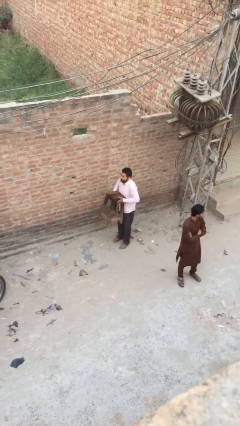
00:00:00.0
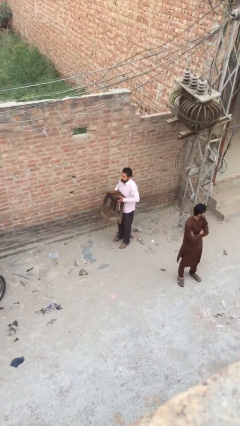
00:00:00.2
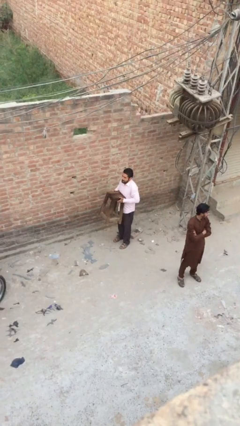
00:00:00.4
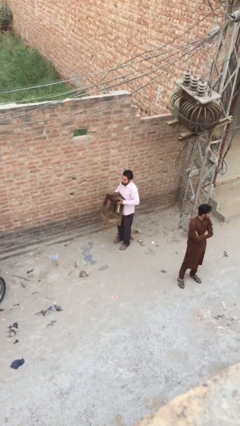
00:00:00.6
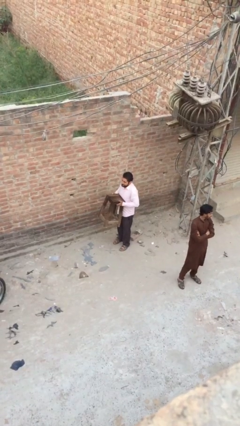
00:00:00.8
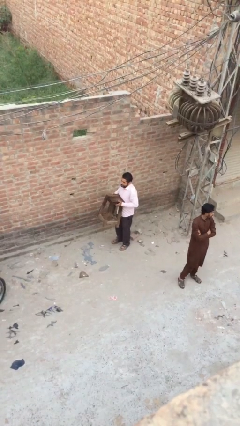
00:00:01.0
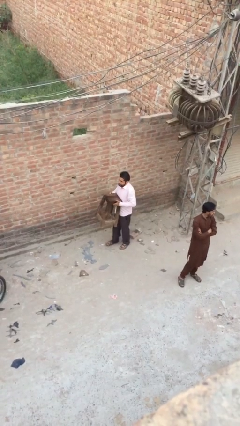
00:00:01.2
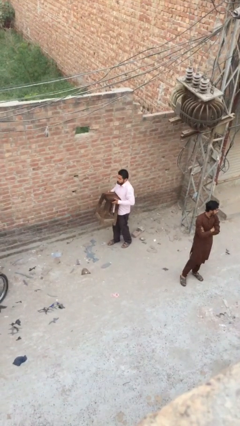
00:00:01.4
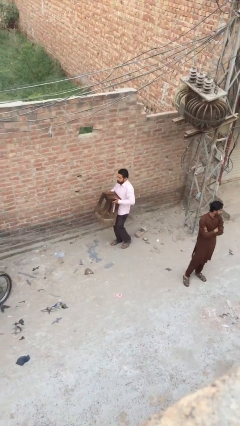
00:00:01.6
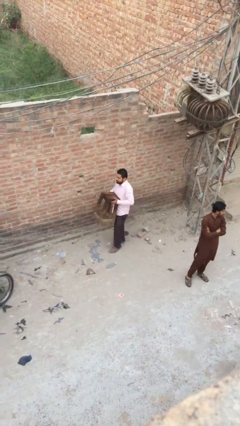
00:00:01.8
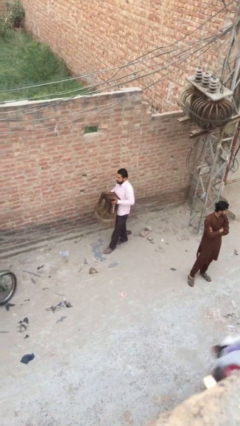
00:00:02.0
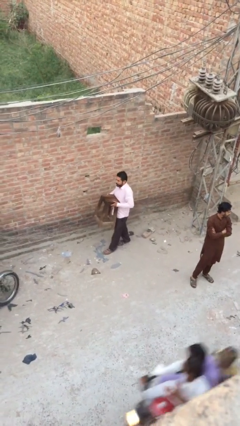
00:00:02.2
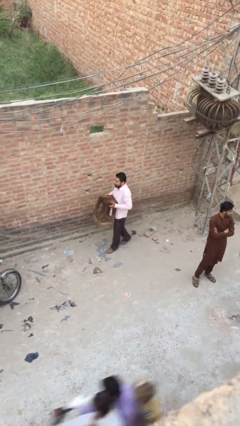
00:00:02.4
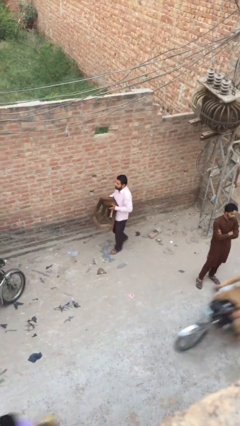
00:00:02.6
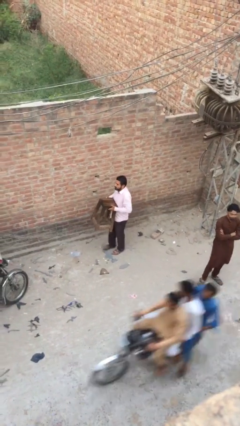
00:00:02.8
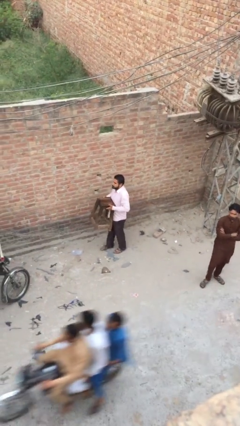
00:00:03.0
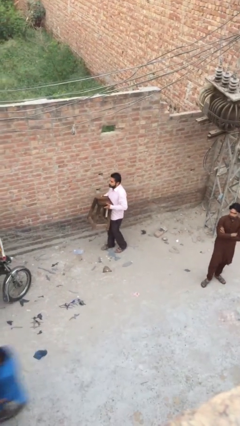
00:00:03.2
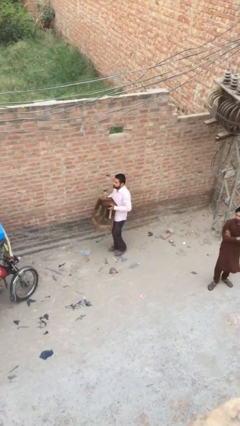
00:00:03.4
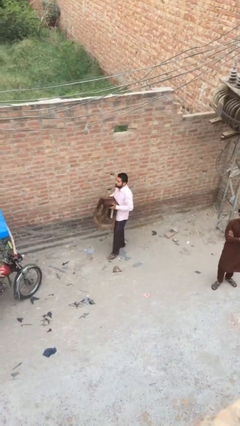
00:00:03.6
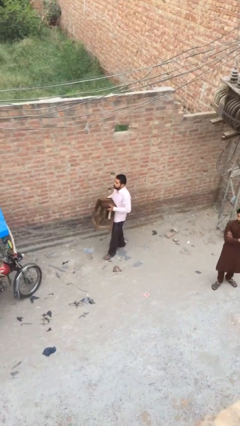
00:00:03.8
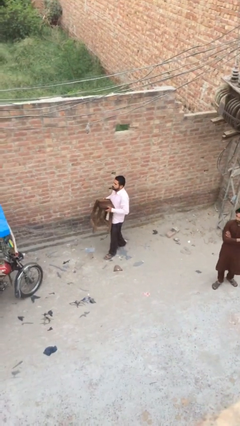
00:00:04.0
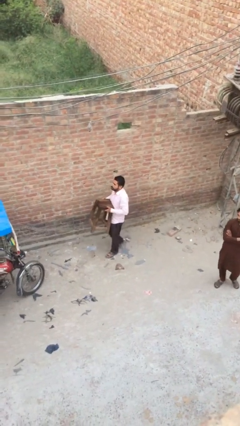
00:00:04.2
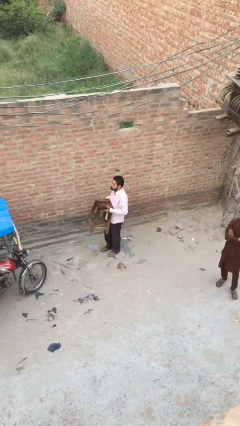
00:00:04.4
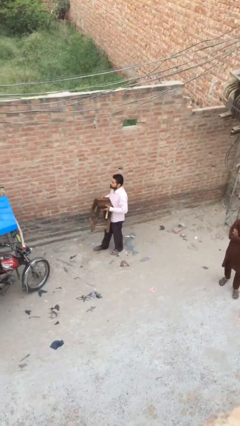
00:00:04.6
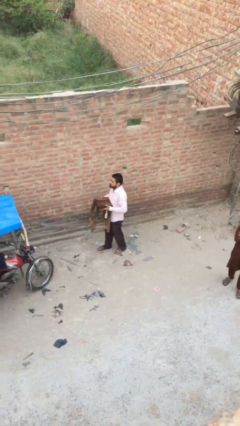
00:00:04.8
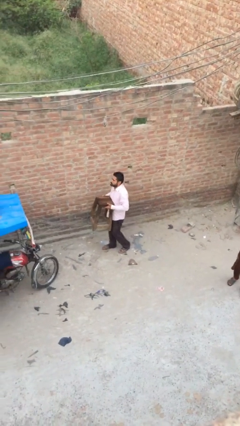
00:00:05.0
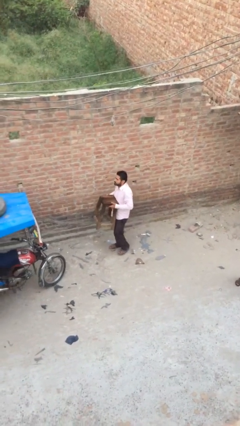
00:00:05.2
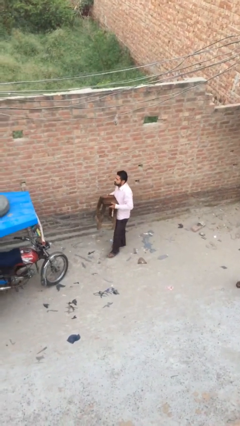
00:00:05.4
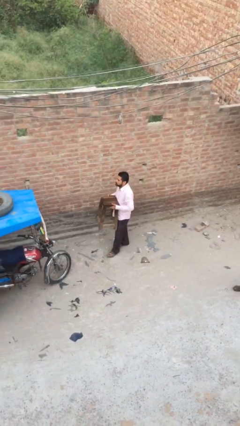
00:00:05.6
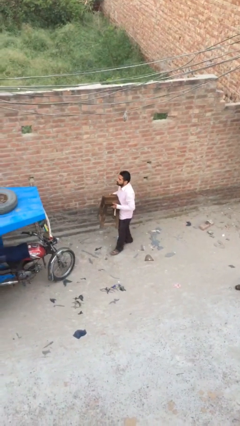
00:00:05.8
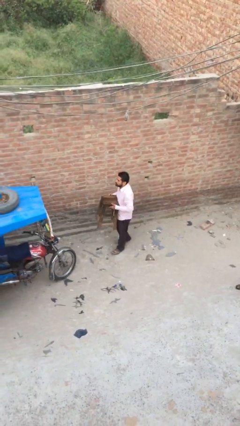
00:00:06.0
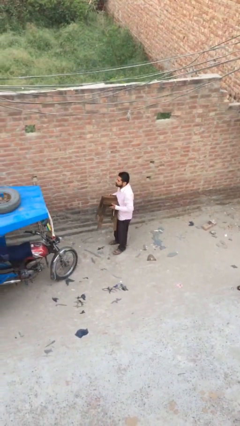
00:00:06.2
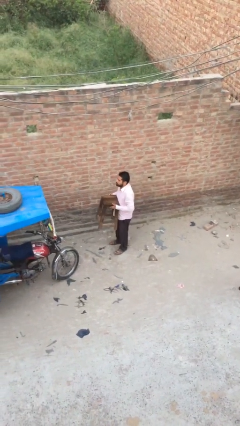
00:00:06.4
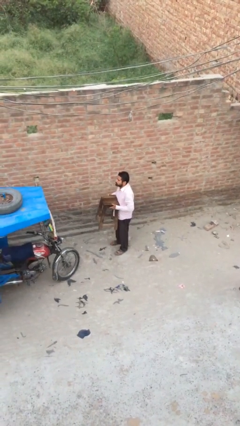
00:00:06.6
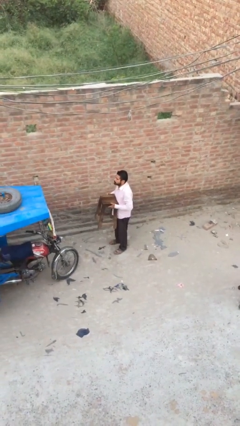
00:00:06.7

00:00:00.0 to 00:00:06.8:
person carries heavy object

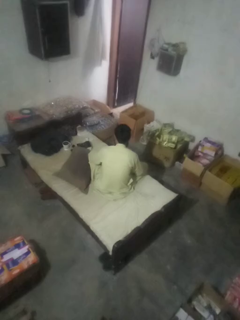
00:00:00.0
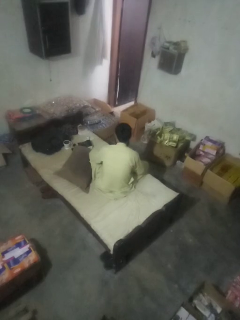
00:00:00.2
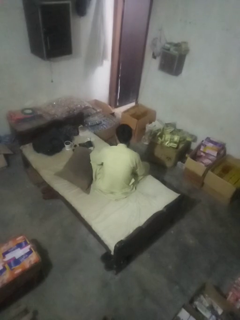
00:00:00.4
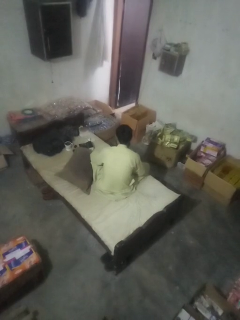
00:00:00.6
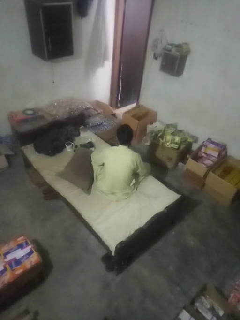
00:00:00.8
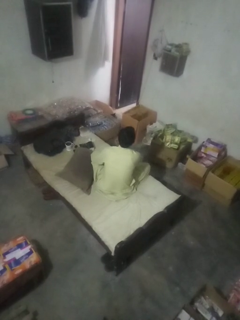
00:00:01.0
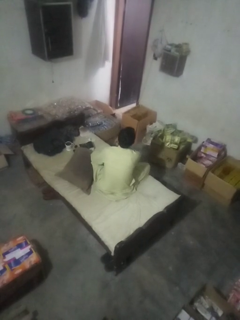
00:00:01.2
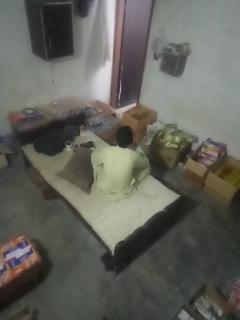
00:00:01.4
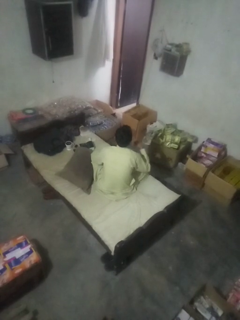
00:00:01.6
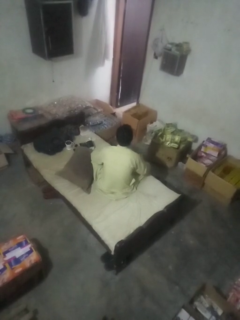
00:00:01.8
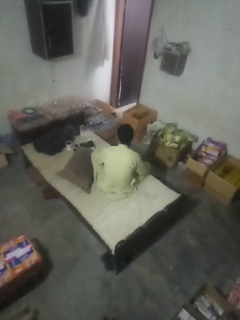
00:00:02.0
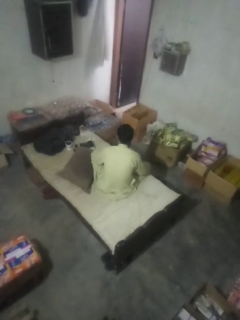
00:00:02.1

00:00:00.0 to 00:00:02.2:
person gestures cut

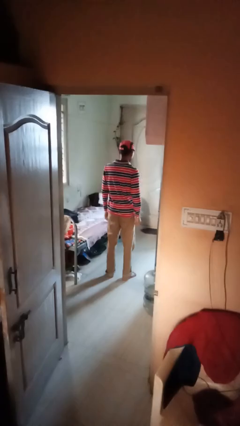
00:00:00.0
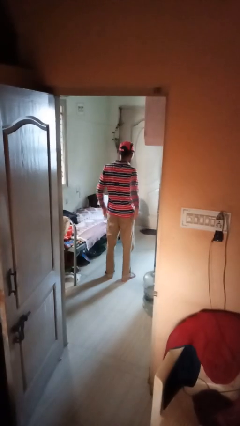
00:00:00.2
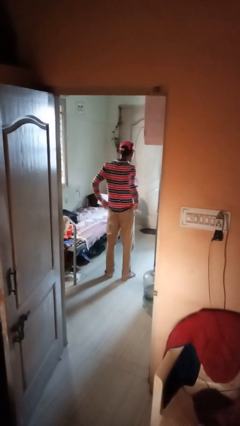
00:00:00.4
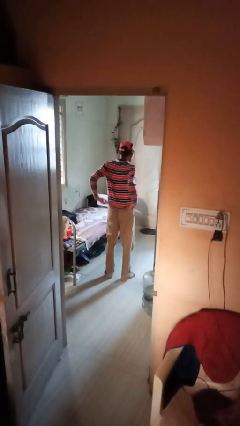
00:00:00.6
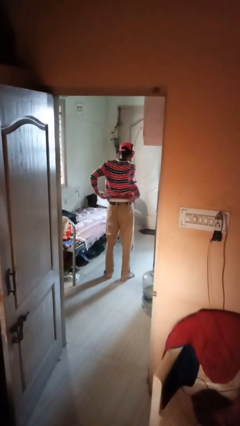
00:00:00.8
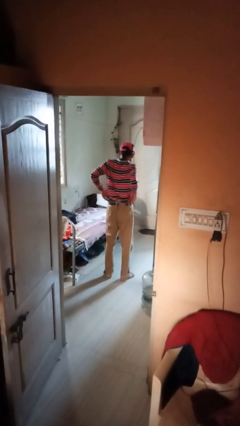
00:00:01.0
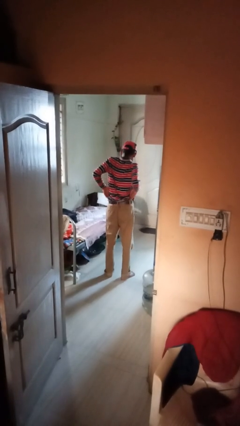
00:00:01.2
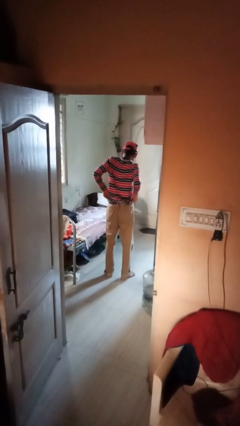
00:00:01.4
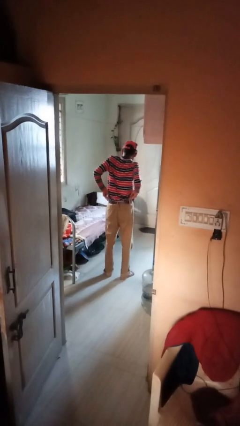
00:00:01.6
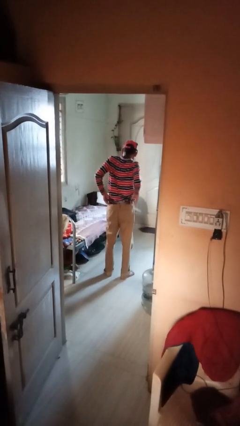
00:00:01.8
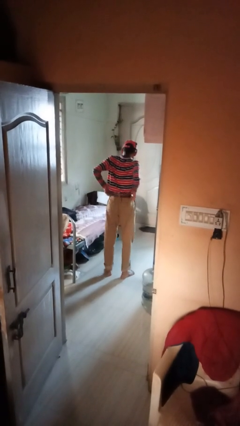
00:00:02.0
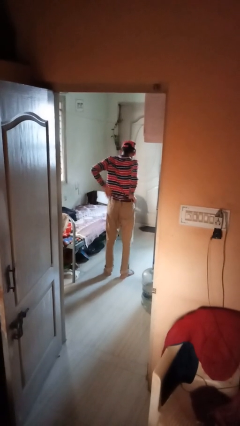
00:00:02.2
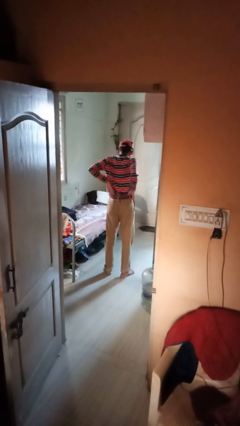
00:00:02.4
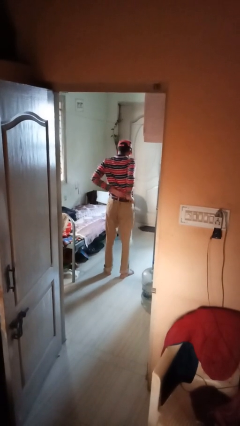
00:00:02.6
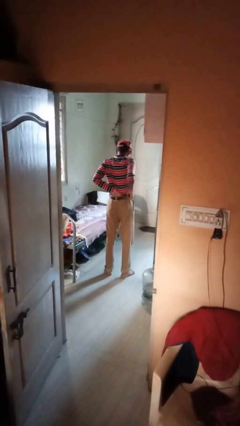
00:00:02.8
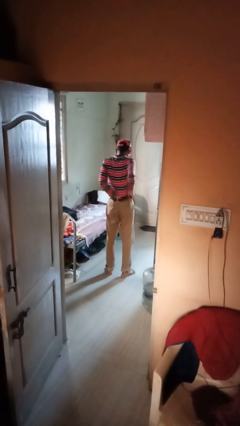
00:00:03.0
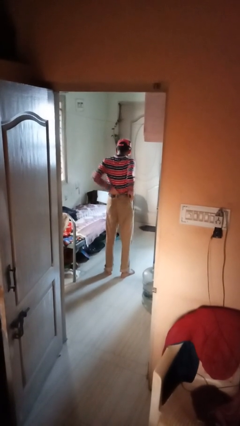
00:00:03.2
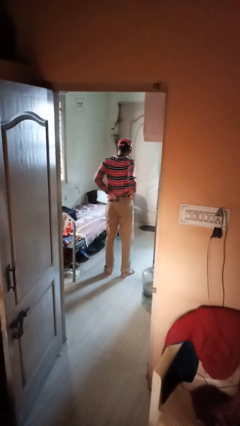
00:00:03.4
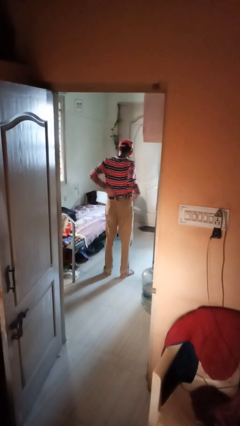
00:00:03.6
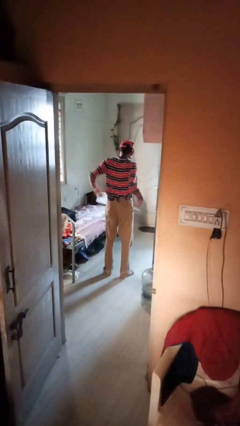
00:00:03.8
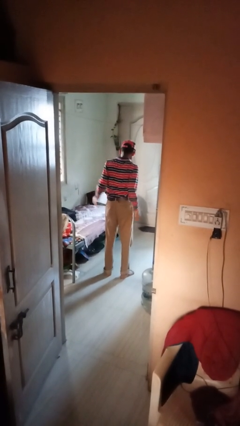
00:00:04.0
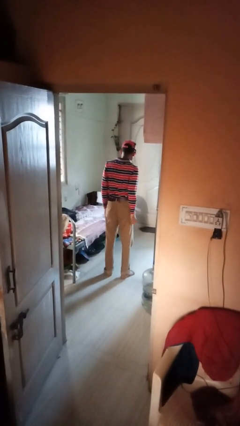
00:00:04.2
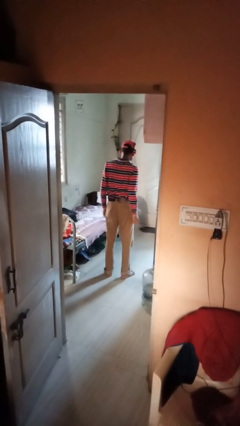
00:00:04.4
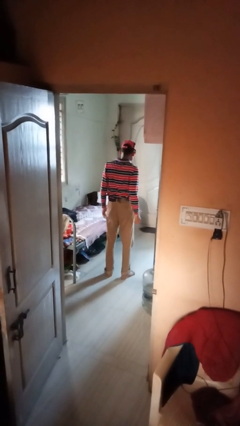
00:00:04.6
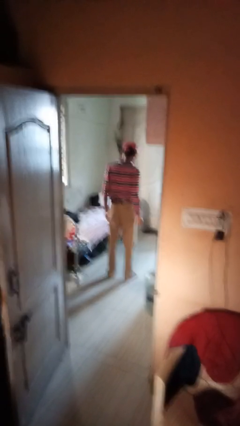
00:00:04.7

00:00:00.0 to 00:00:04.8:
person tucks in shirt

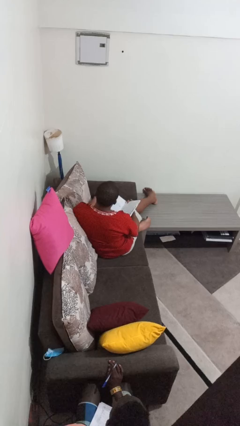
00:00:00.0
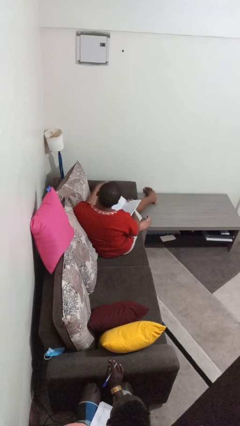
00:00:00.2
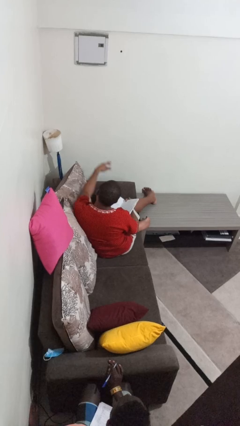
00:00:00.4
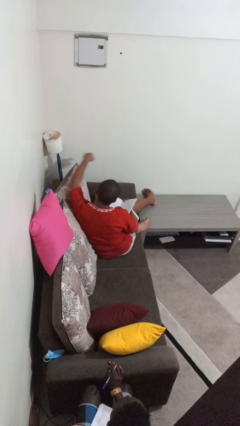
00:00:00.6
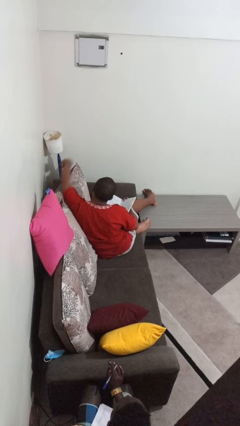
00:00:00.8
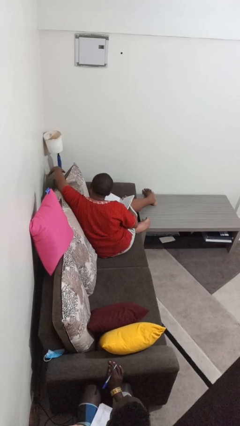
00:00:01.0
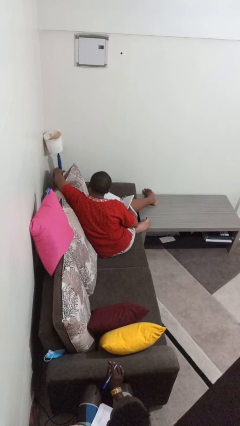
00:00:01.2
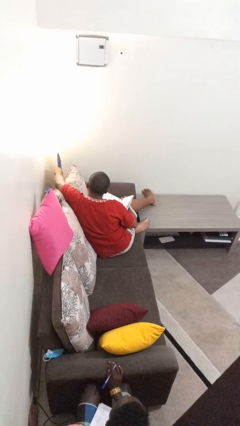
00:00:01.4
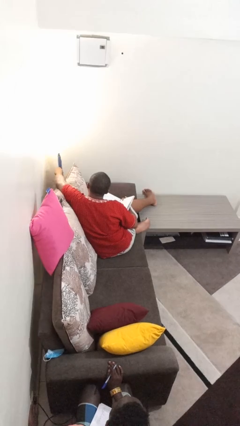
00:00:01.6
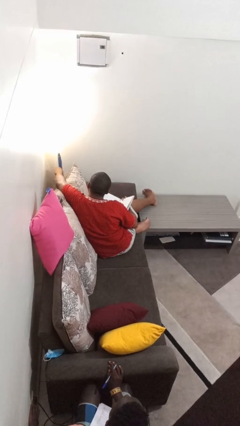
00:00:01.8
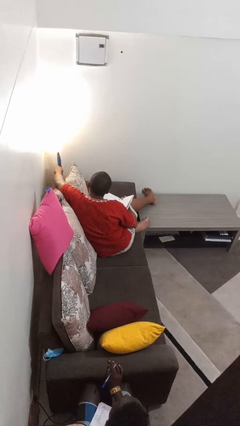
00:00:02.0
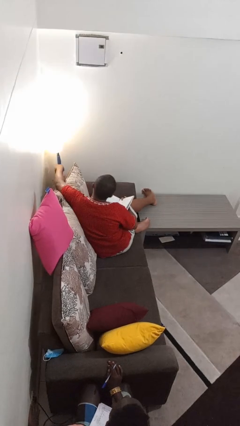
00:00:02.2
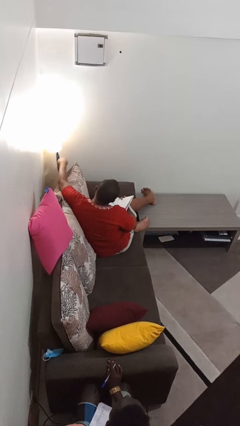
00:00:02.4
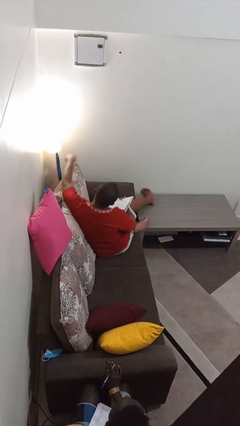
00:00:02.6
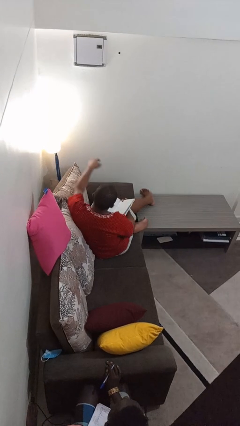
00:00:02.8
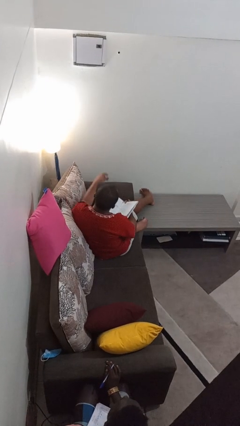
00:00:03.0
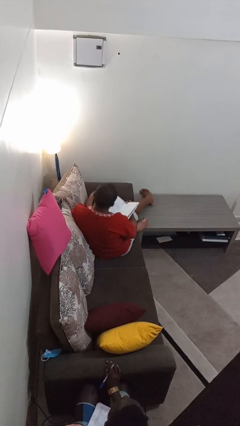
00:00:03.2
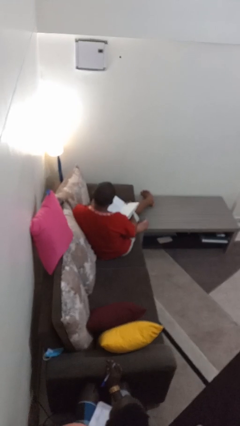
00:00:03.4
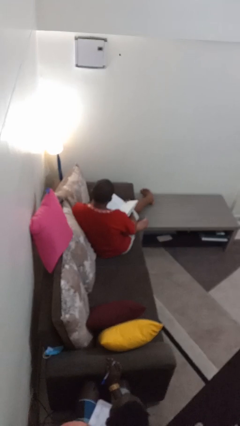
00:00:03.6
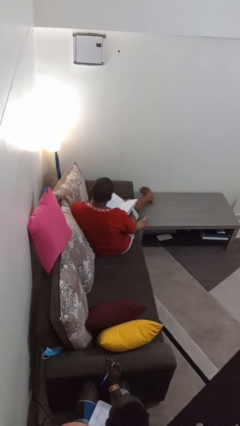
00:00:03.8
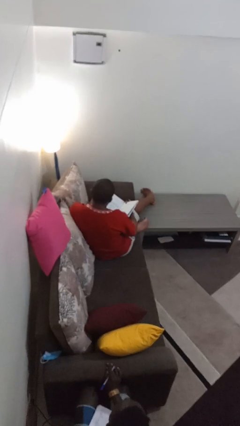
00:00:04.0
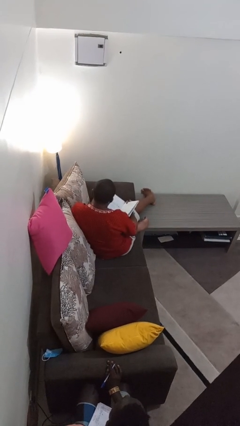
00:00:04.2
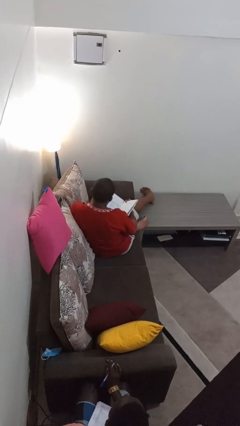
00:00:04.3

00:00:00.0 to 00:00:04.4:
person turns on lamp

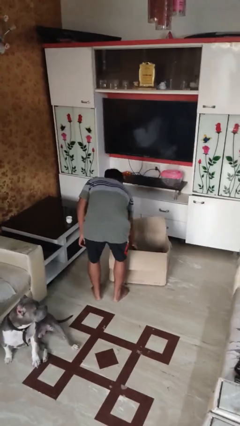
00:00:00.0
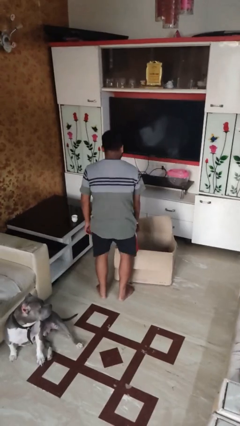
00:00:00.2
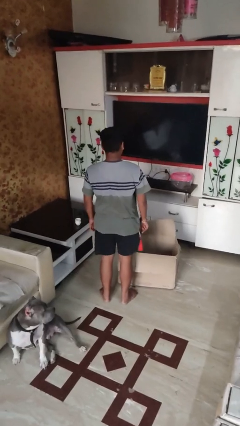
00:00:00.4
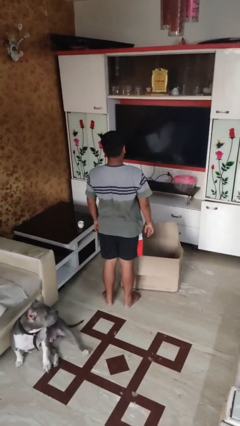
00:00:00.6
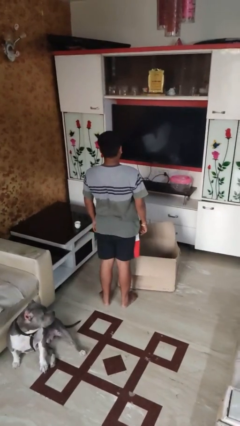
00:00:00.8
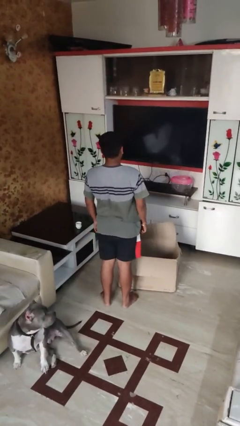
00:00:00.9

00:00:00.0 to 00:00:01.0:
person puts object into box
